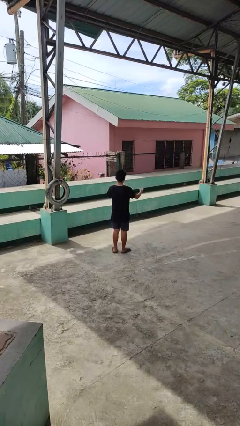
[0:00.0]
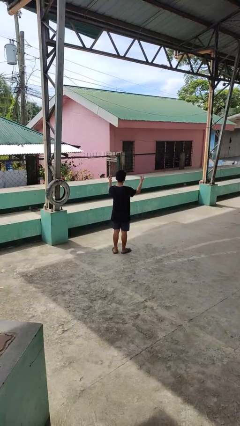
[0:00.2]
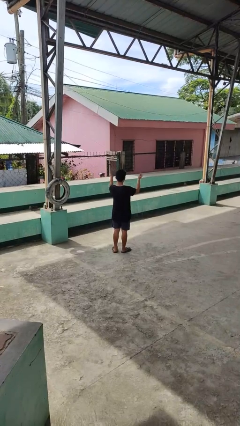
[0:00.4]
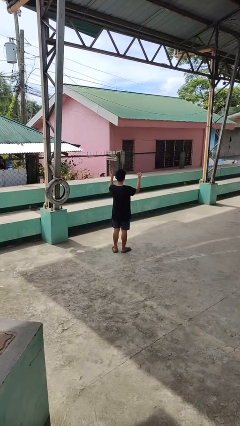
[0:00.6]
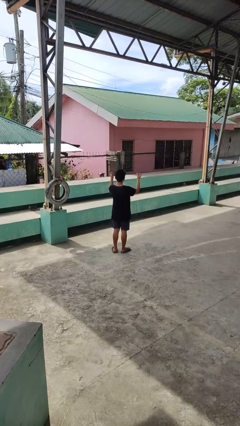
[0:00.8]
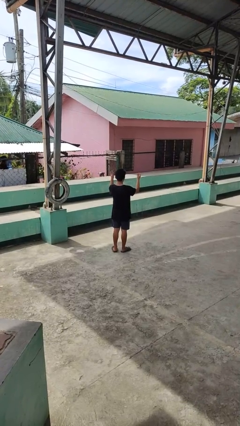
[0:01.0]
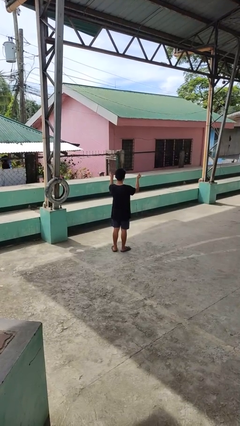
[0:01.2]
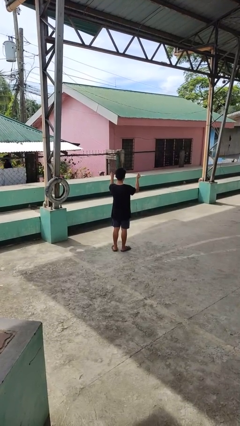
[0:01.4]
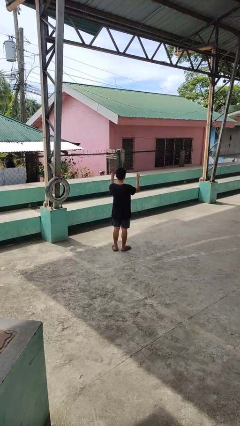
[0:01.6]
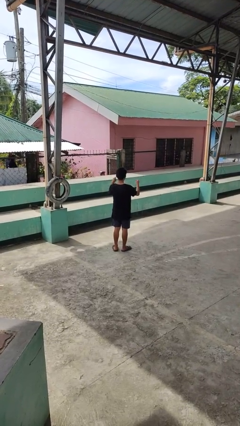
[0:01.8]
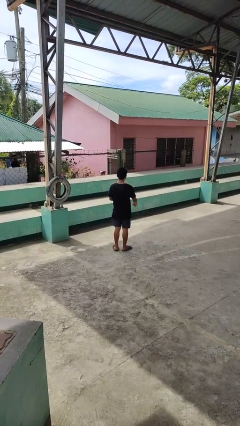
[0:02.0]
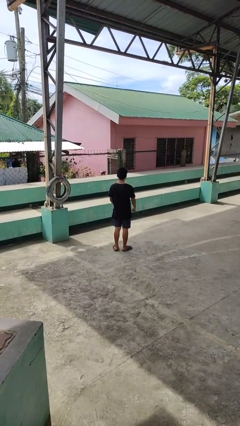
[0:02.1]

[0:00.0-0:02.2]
person snaps fingers

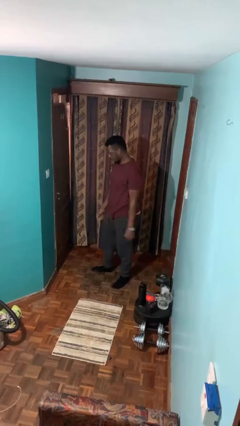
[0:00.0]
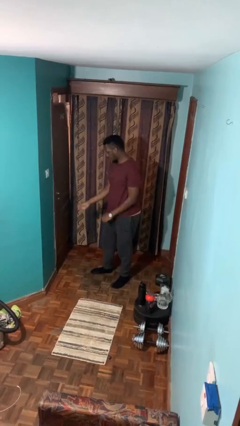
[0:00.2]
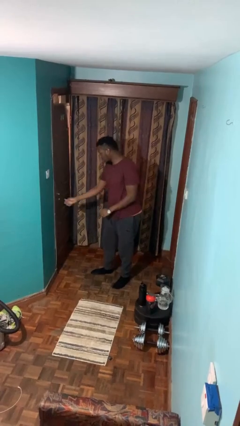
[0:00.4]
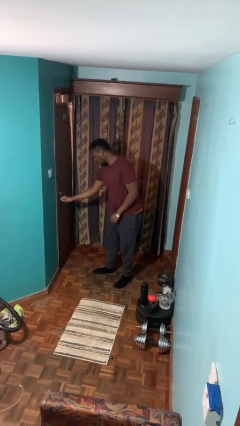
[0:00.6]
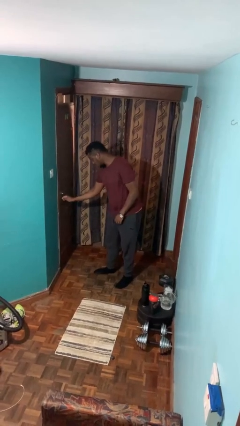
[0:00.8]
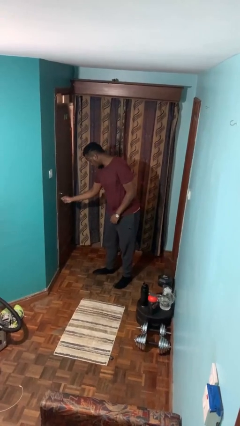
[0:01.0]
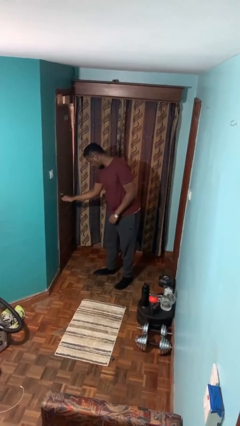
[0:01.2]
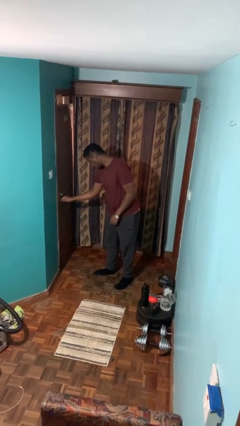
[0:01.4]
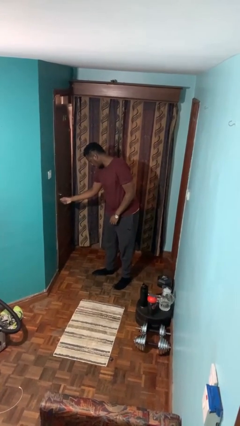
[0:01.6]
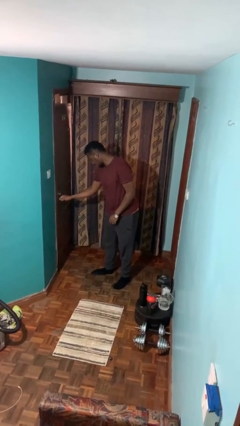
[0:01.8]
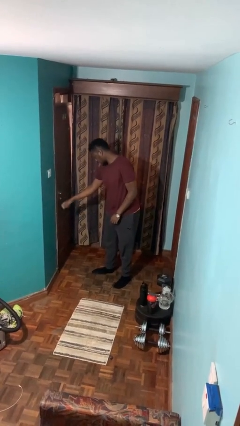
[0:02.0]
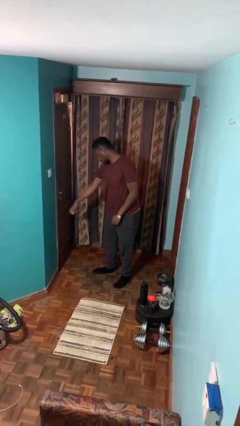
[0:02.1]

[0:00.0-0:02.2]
person locks door with keys

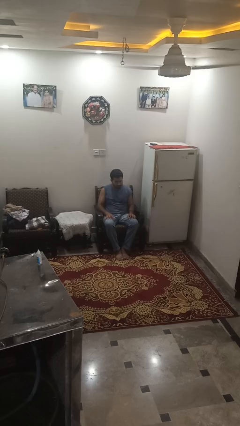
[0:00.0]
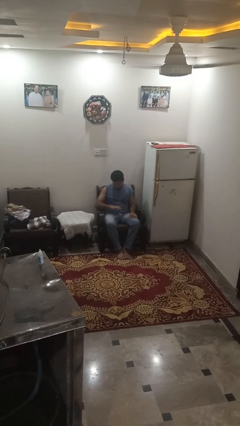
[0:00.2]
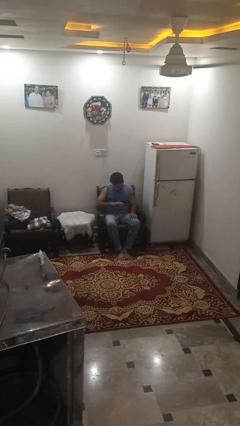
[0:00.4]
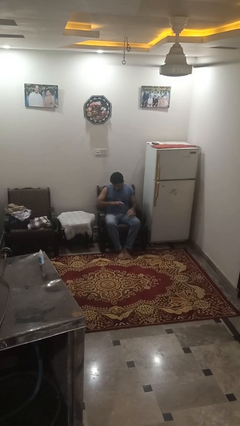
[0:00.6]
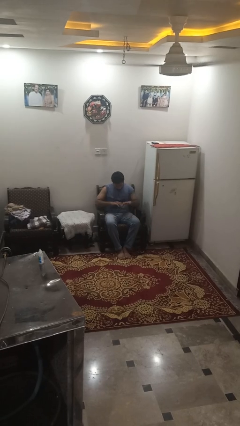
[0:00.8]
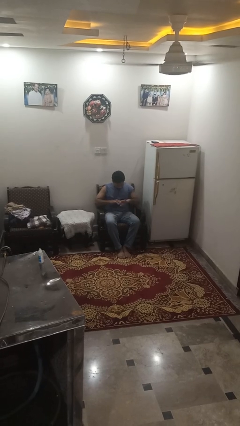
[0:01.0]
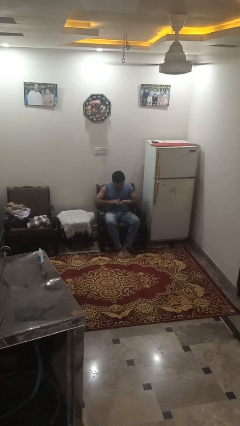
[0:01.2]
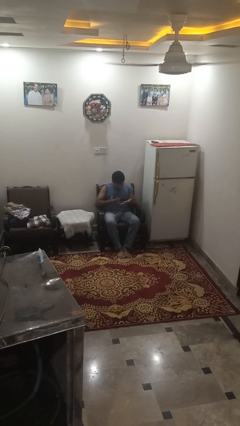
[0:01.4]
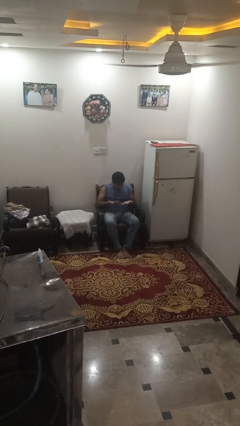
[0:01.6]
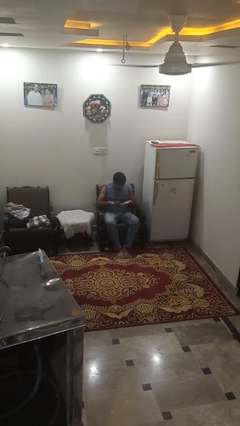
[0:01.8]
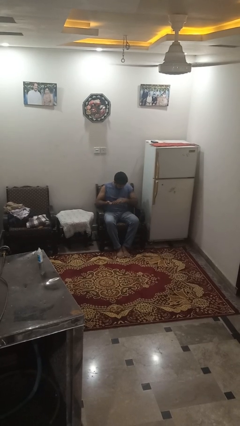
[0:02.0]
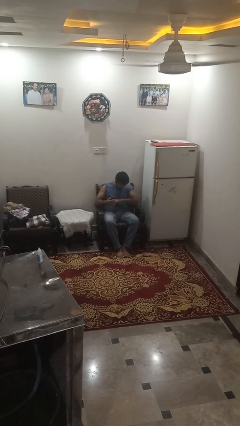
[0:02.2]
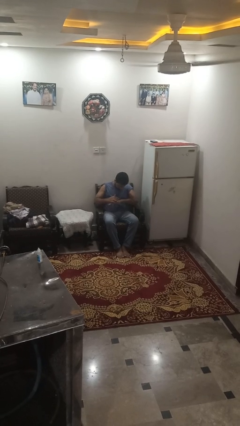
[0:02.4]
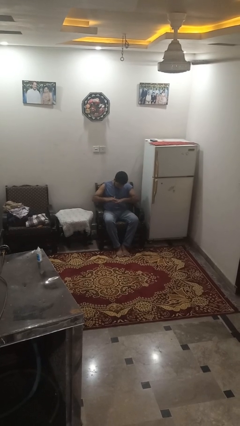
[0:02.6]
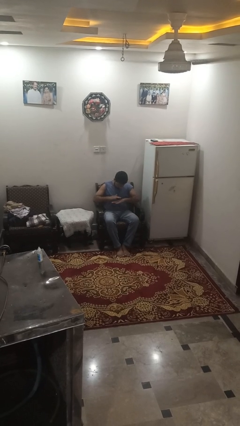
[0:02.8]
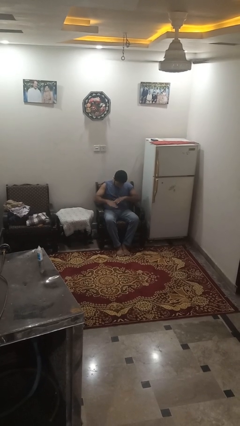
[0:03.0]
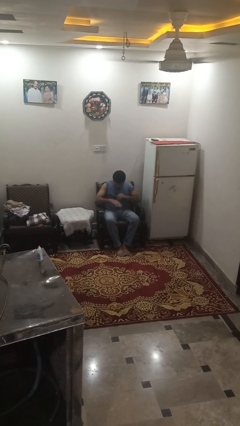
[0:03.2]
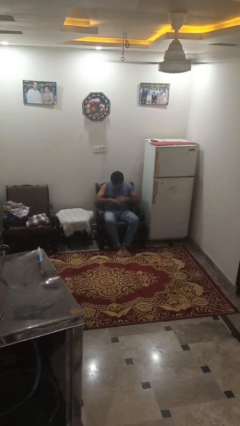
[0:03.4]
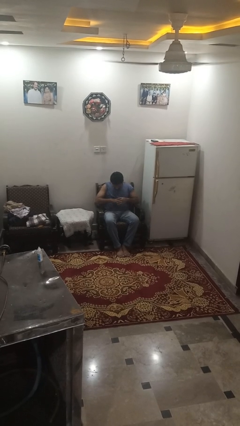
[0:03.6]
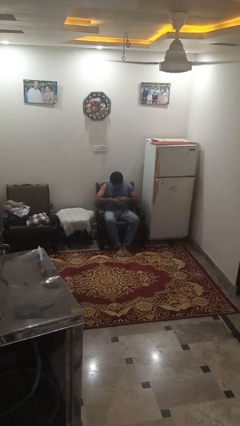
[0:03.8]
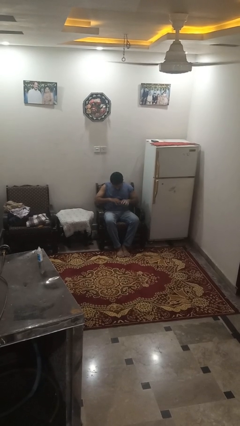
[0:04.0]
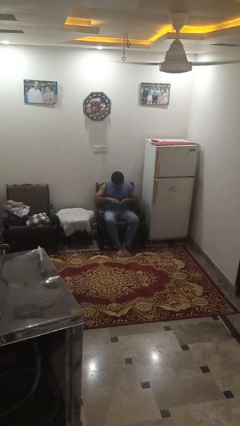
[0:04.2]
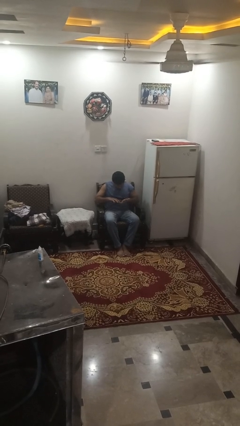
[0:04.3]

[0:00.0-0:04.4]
person looks at hands in lap

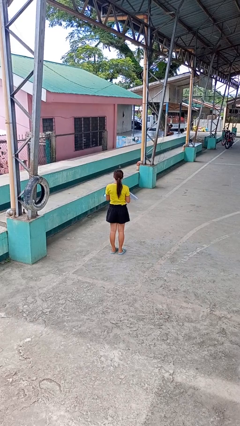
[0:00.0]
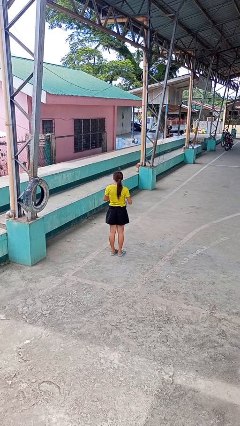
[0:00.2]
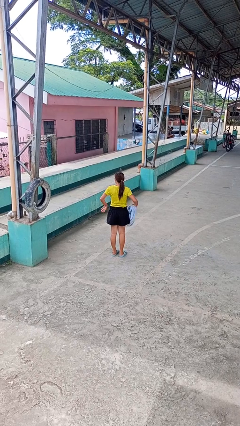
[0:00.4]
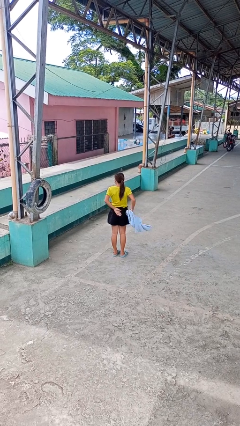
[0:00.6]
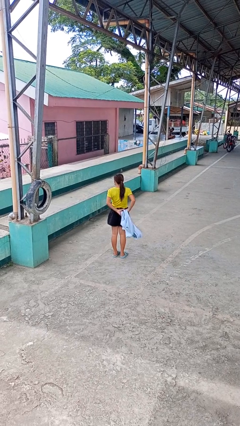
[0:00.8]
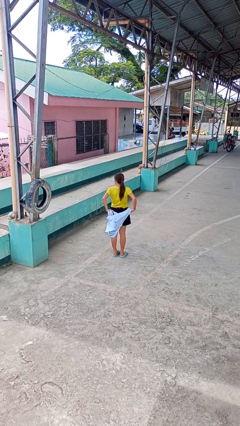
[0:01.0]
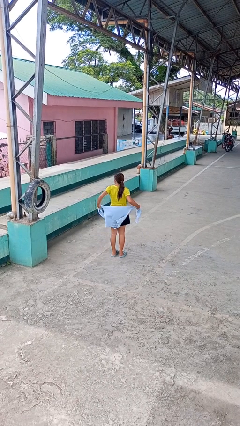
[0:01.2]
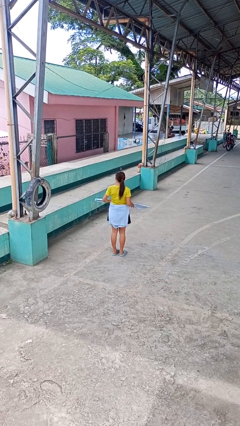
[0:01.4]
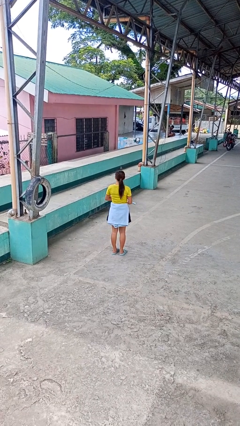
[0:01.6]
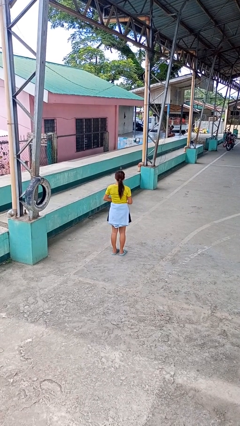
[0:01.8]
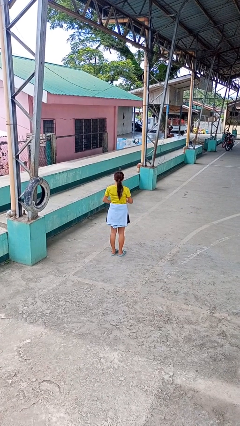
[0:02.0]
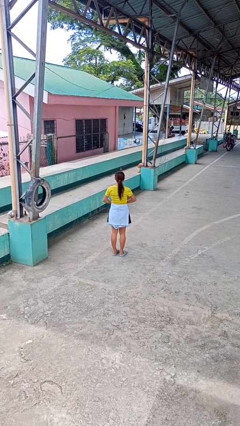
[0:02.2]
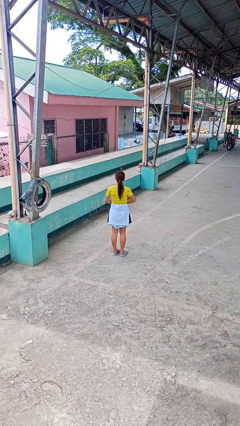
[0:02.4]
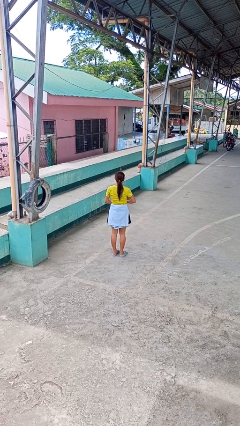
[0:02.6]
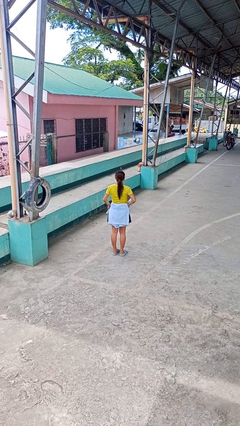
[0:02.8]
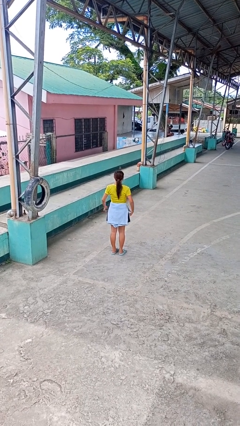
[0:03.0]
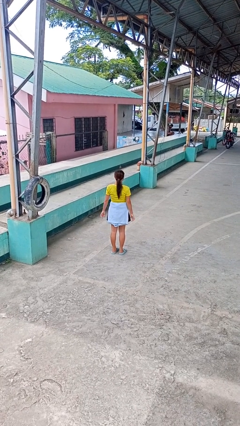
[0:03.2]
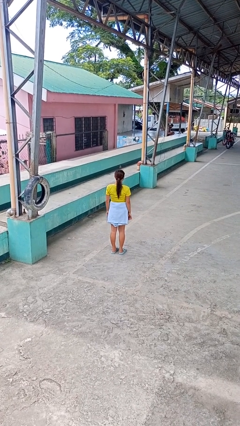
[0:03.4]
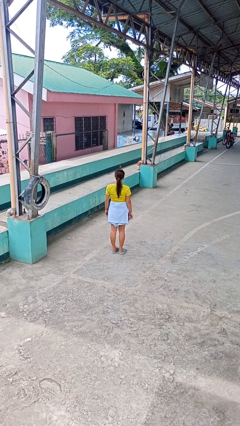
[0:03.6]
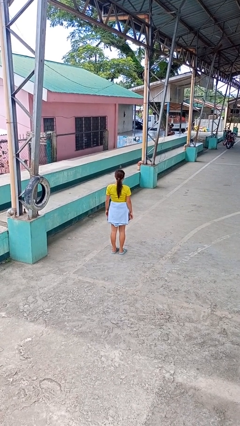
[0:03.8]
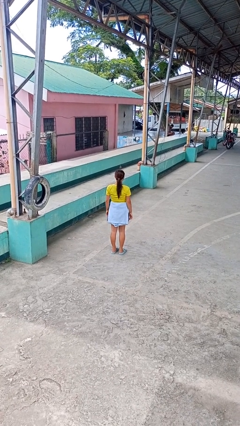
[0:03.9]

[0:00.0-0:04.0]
person ties jacket around waist

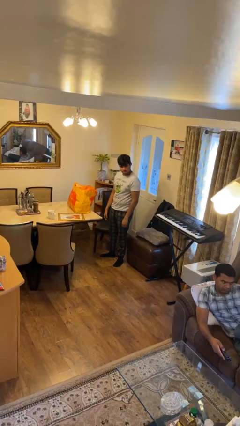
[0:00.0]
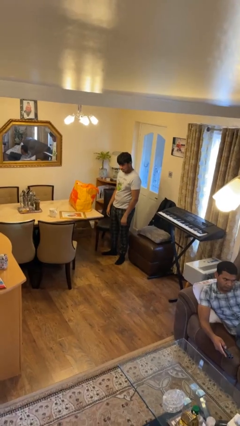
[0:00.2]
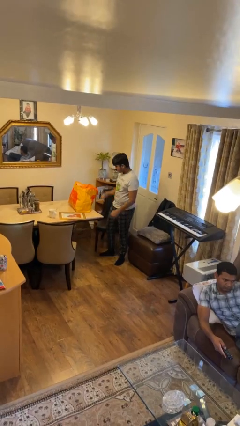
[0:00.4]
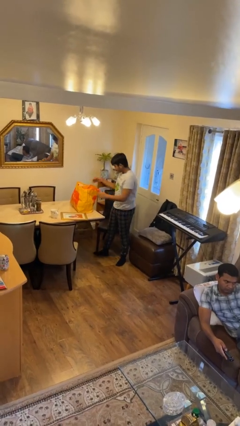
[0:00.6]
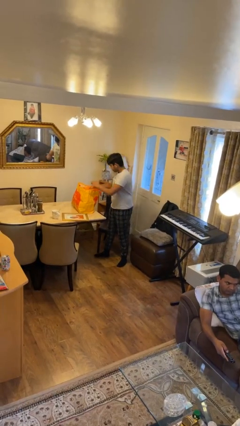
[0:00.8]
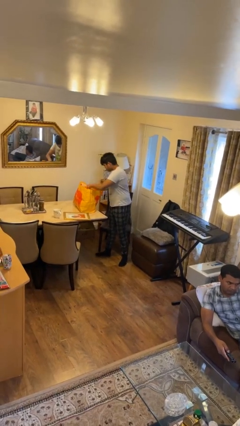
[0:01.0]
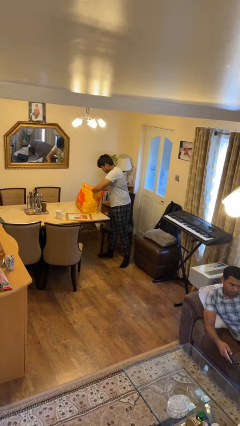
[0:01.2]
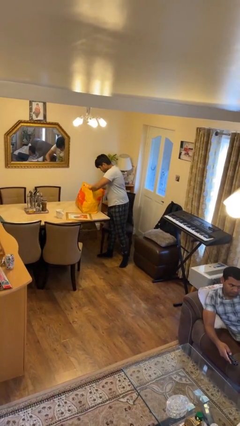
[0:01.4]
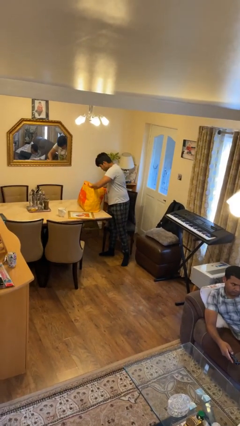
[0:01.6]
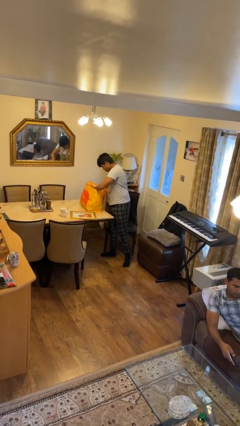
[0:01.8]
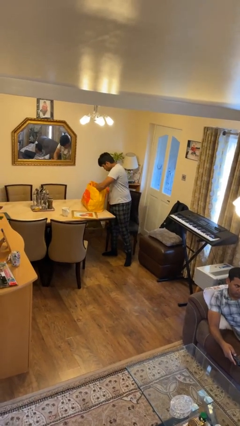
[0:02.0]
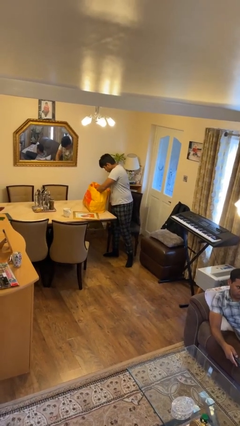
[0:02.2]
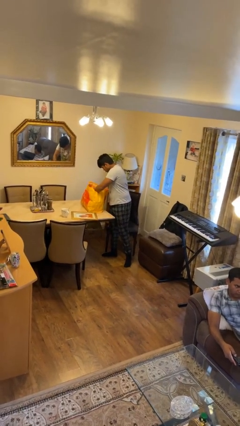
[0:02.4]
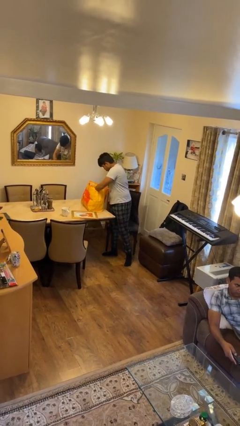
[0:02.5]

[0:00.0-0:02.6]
person searches in bag

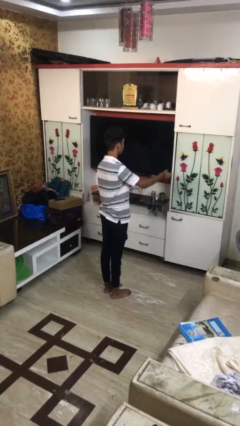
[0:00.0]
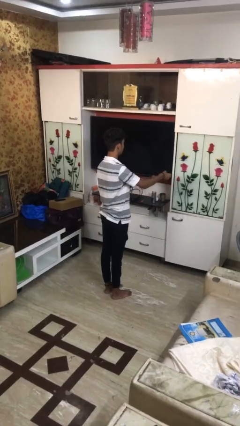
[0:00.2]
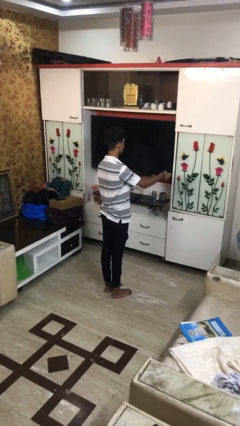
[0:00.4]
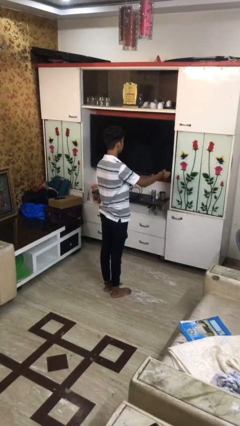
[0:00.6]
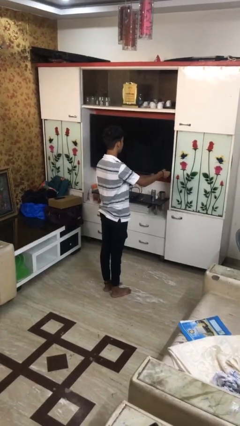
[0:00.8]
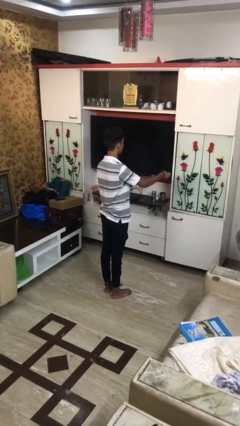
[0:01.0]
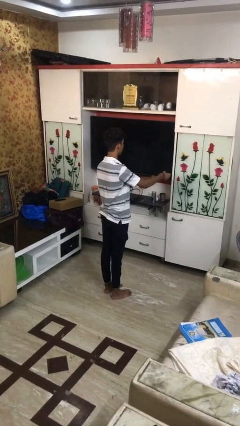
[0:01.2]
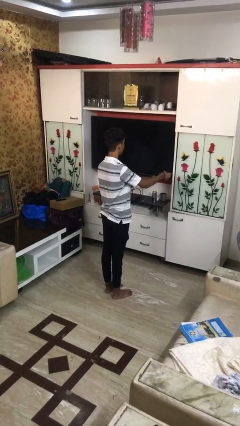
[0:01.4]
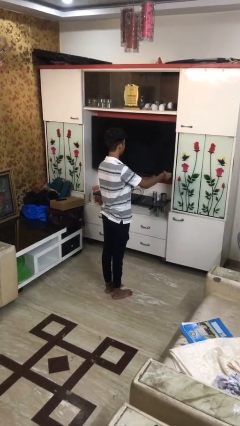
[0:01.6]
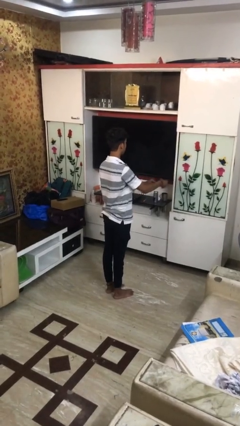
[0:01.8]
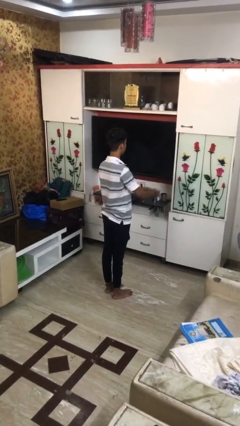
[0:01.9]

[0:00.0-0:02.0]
person clips fingernails

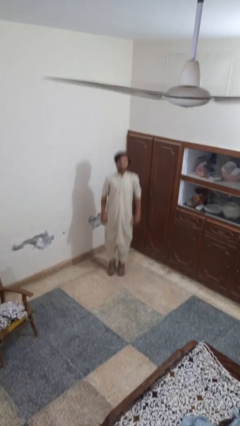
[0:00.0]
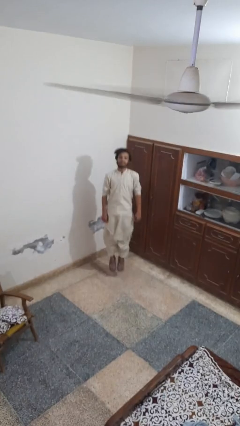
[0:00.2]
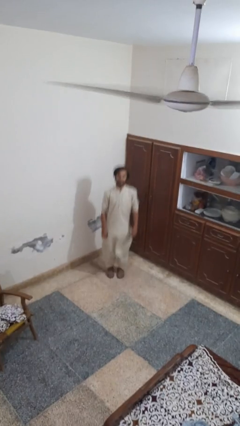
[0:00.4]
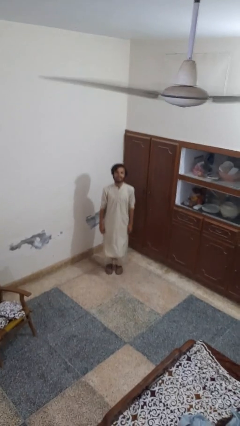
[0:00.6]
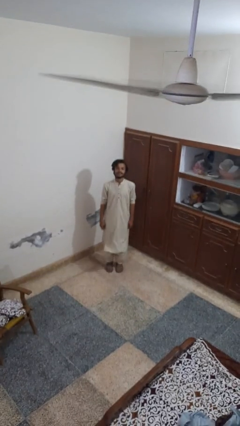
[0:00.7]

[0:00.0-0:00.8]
person jumps
